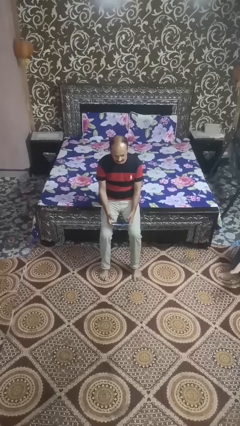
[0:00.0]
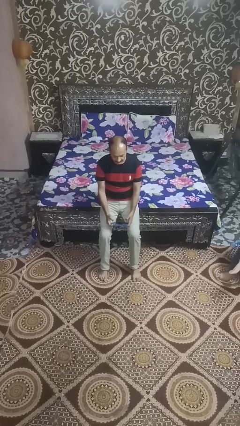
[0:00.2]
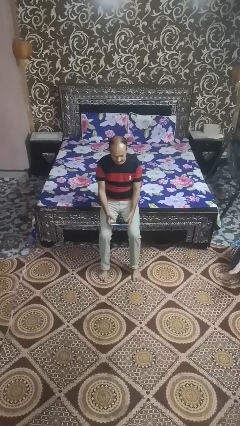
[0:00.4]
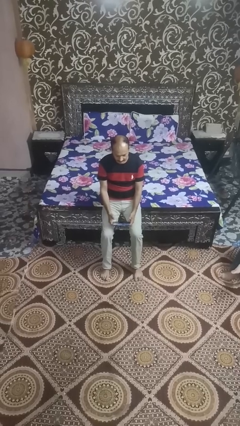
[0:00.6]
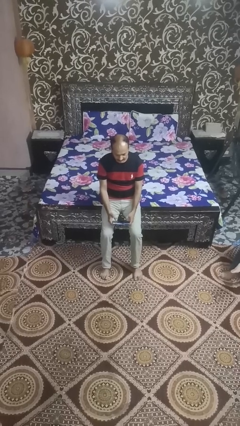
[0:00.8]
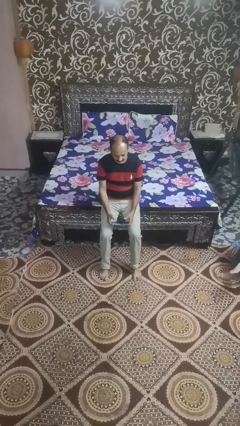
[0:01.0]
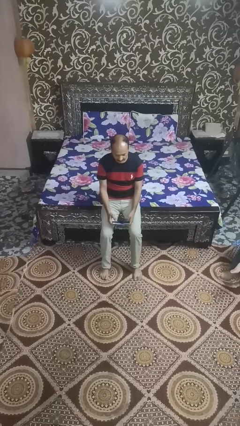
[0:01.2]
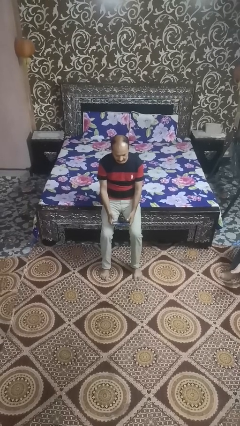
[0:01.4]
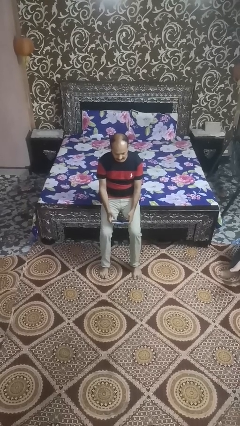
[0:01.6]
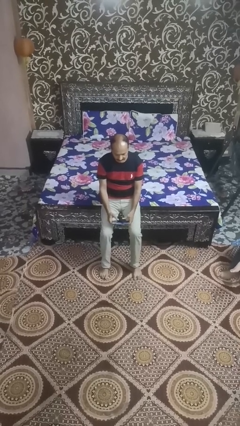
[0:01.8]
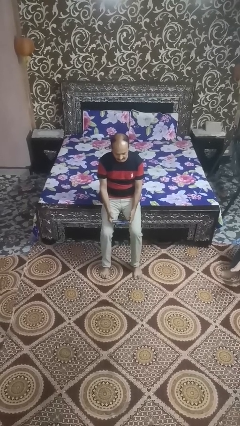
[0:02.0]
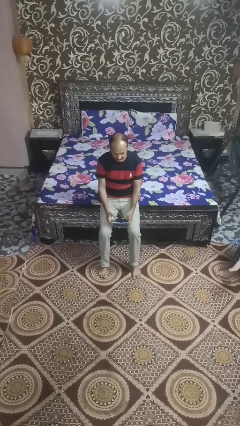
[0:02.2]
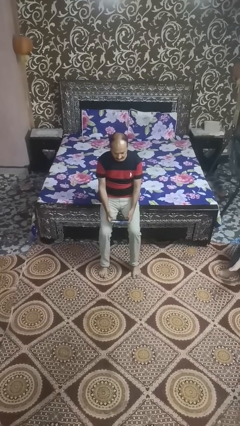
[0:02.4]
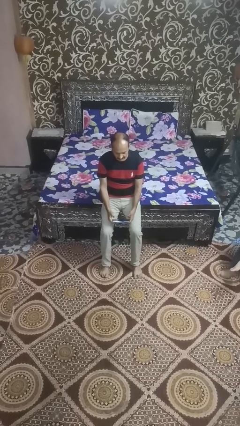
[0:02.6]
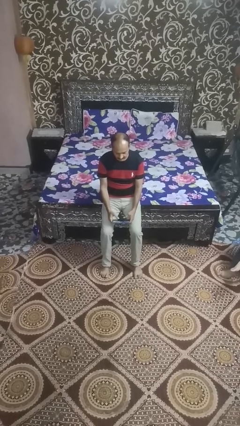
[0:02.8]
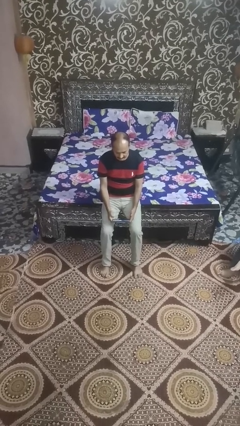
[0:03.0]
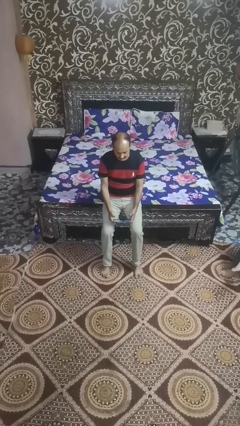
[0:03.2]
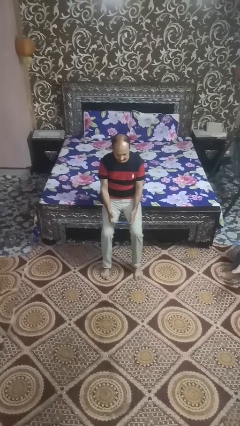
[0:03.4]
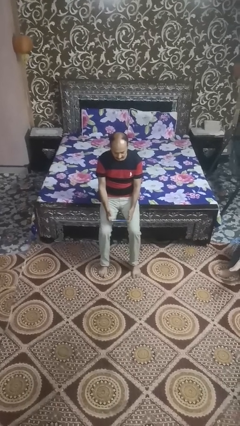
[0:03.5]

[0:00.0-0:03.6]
person interacts with handheld game

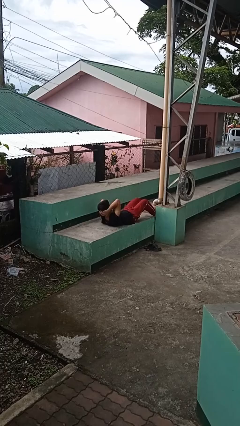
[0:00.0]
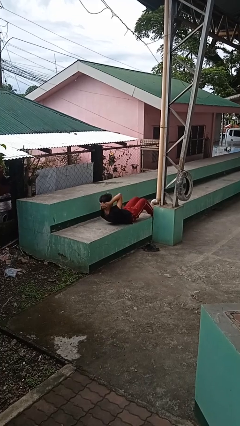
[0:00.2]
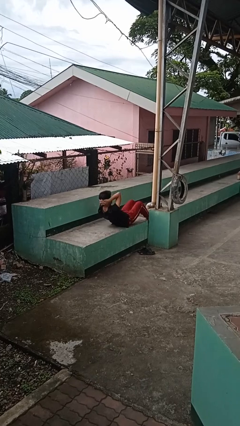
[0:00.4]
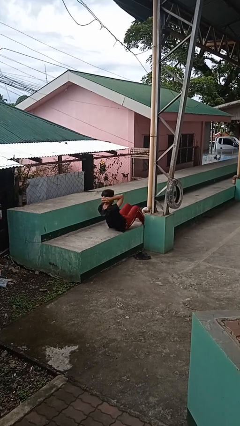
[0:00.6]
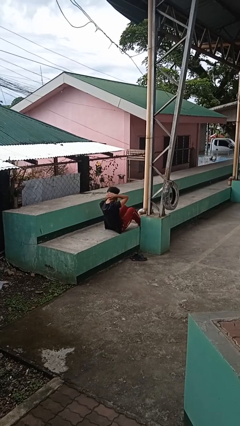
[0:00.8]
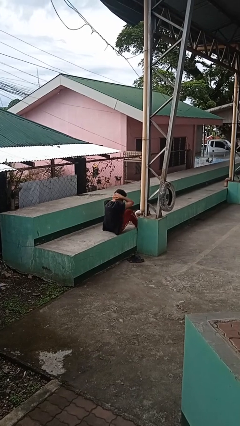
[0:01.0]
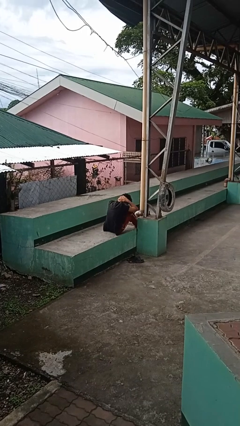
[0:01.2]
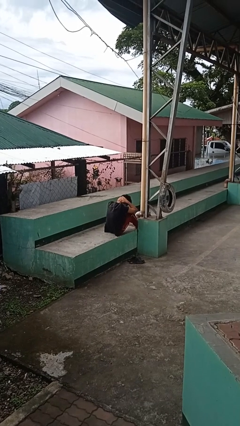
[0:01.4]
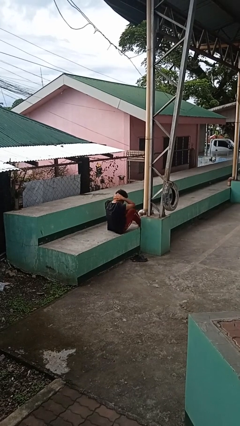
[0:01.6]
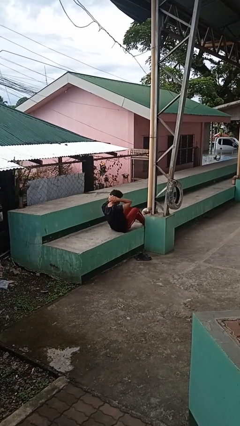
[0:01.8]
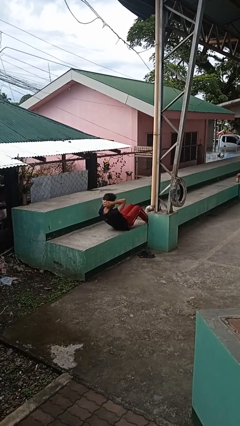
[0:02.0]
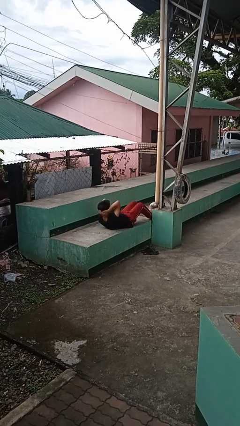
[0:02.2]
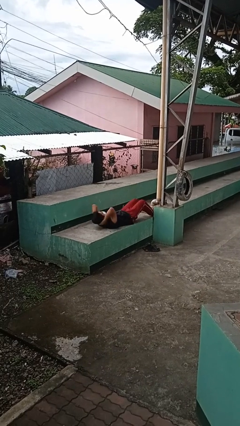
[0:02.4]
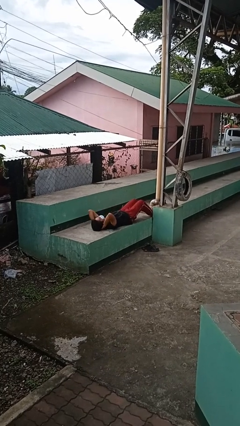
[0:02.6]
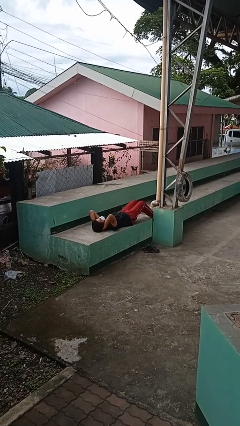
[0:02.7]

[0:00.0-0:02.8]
person exercises with situp

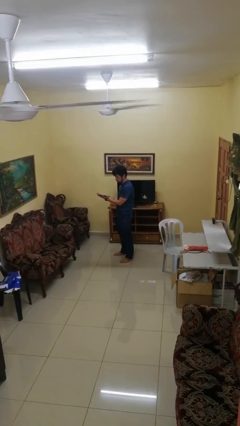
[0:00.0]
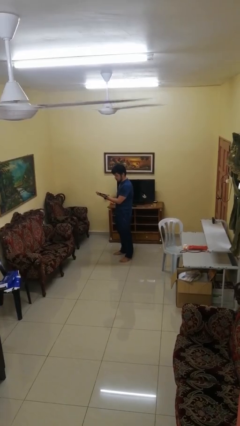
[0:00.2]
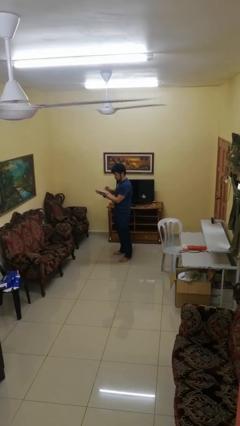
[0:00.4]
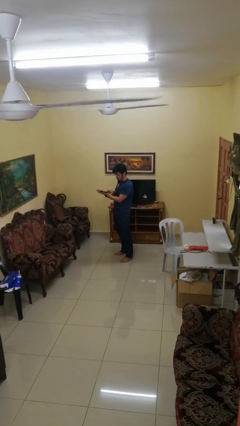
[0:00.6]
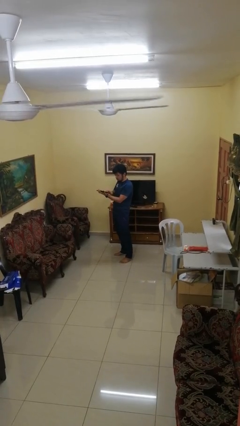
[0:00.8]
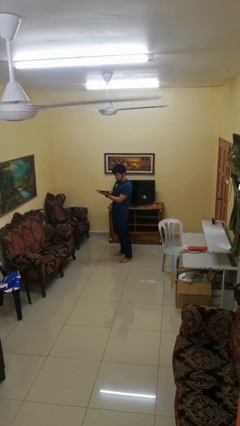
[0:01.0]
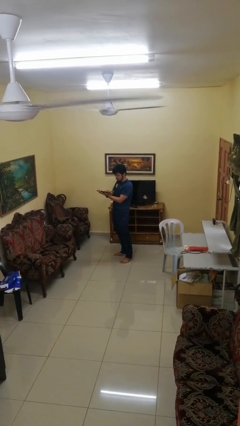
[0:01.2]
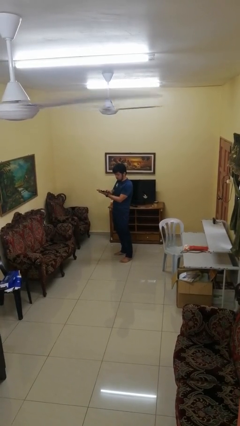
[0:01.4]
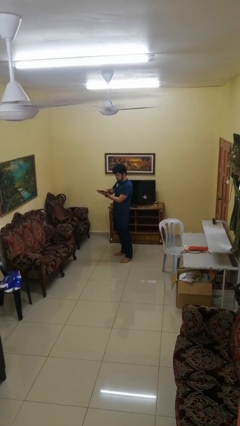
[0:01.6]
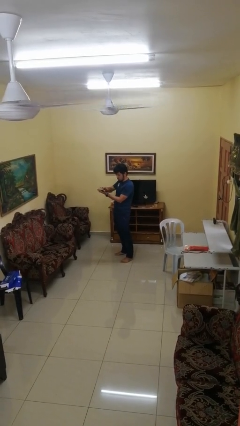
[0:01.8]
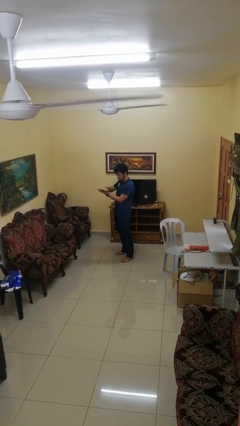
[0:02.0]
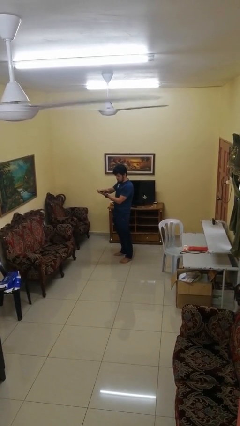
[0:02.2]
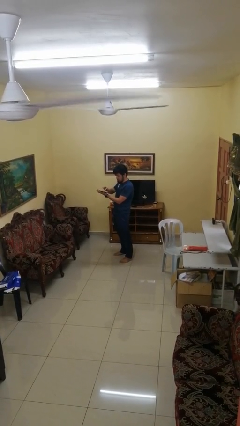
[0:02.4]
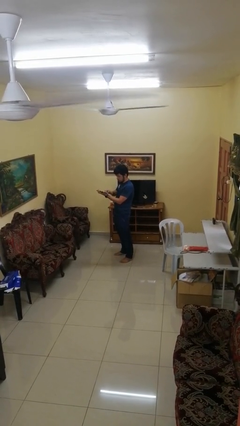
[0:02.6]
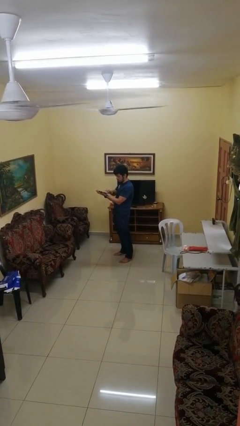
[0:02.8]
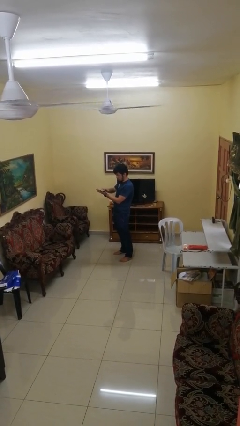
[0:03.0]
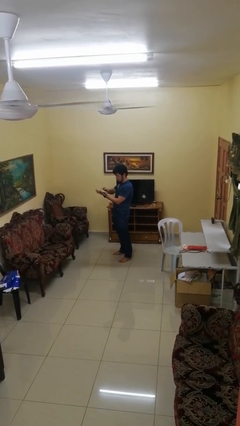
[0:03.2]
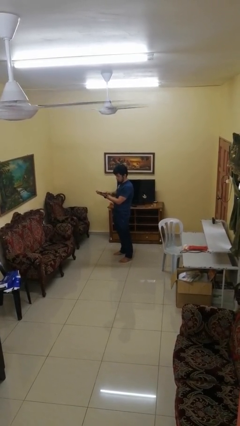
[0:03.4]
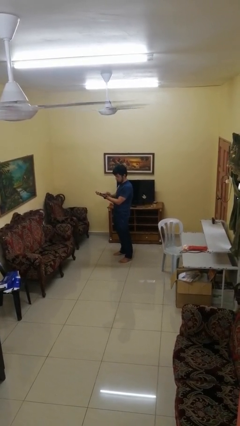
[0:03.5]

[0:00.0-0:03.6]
person interacts with tablet

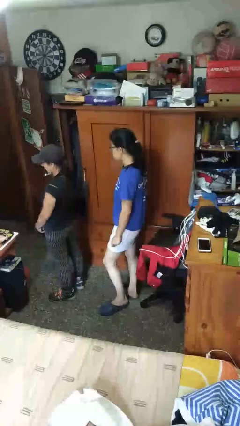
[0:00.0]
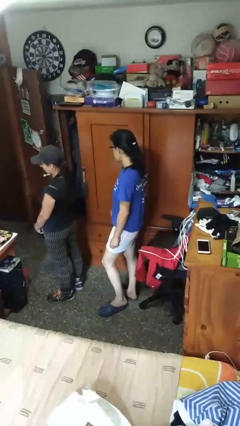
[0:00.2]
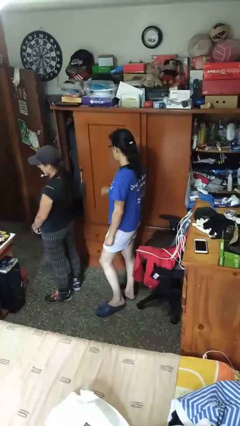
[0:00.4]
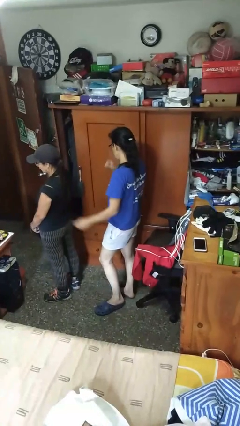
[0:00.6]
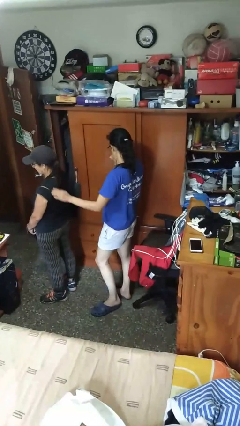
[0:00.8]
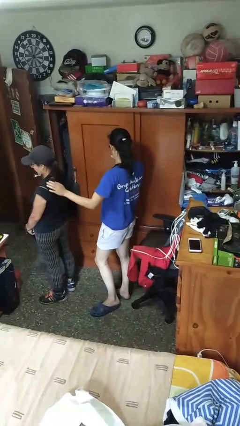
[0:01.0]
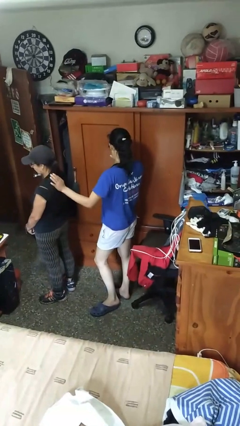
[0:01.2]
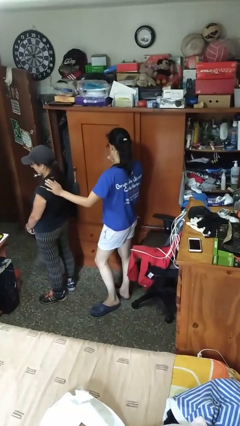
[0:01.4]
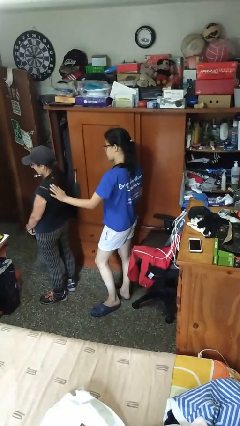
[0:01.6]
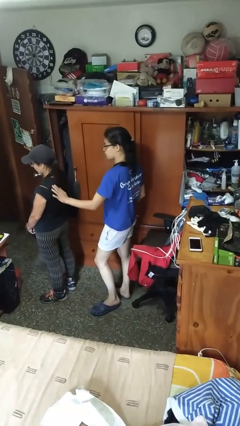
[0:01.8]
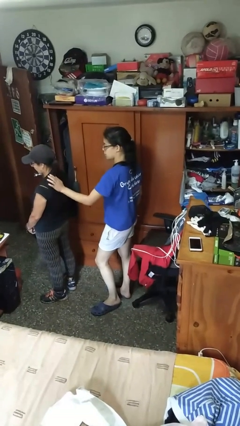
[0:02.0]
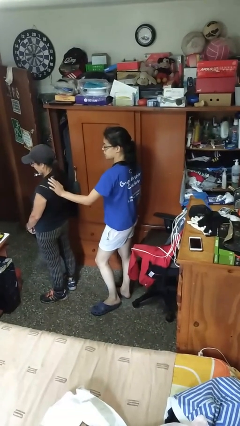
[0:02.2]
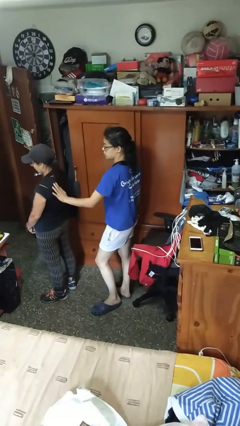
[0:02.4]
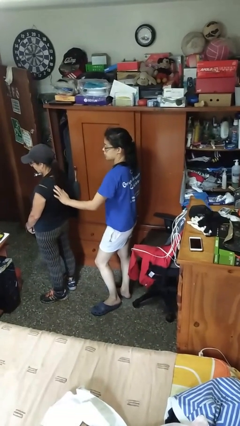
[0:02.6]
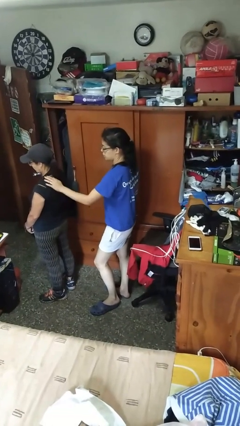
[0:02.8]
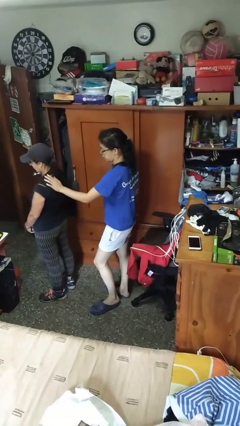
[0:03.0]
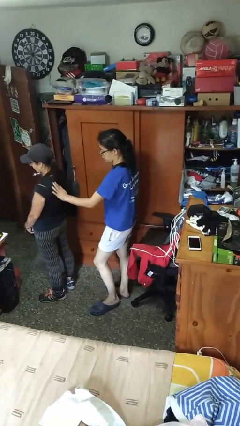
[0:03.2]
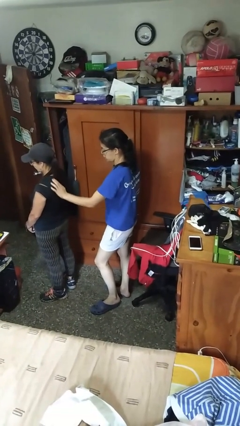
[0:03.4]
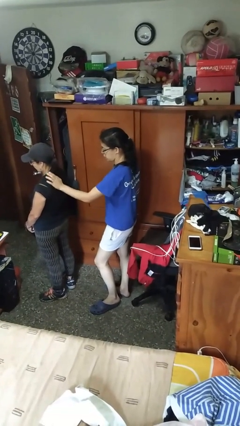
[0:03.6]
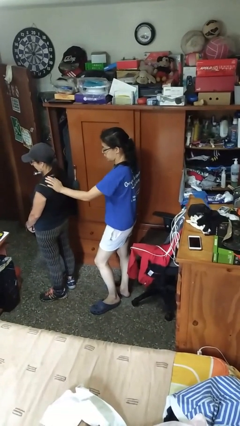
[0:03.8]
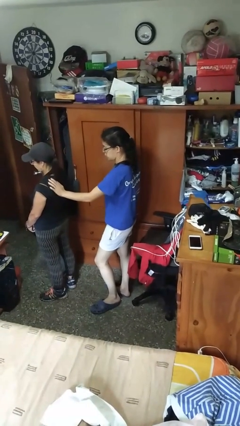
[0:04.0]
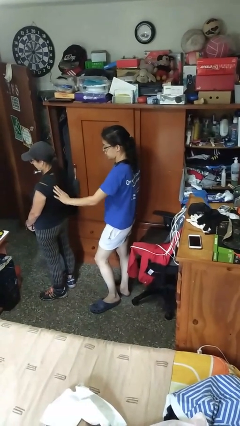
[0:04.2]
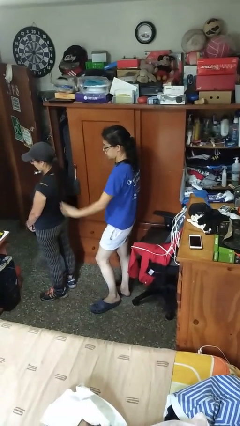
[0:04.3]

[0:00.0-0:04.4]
person touches back of person

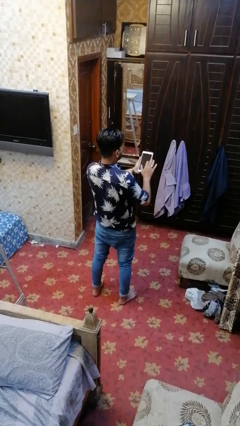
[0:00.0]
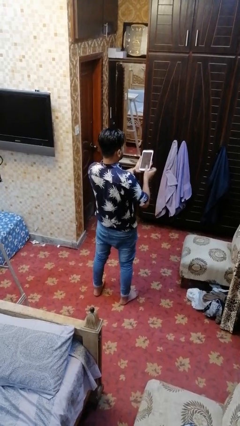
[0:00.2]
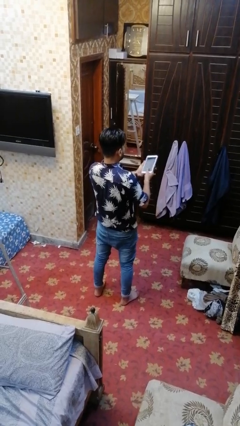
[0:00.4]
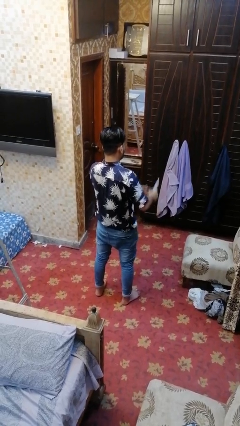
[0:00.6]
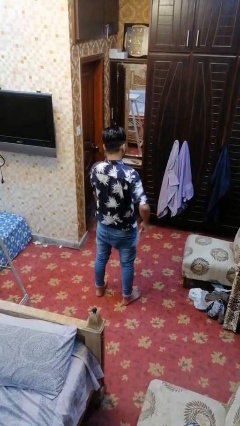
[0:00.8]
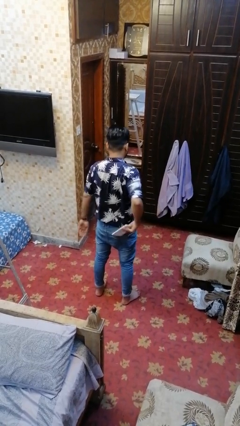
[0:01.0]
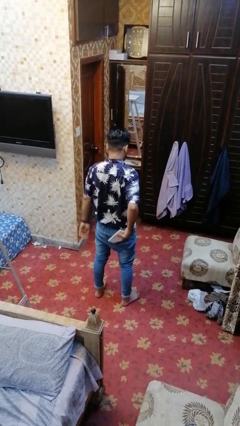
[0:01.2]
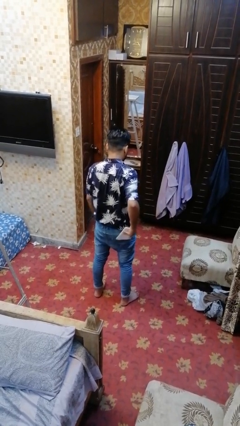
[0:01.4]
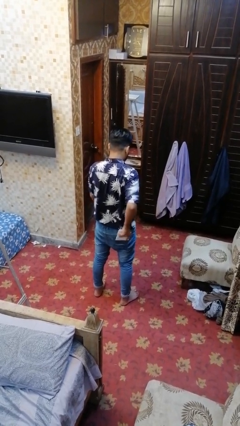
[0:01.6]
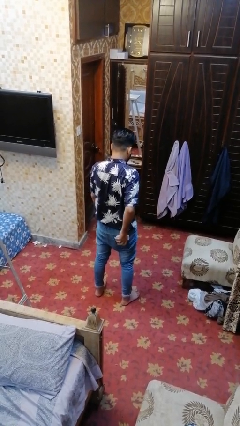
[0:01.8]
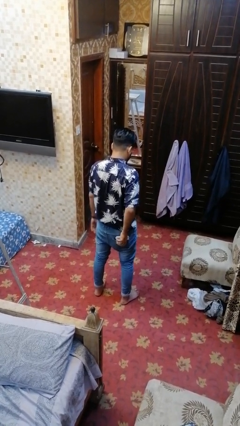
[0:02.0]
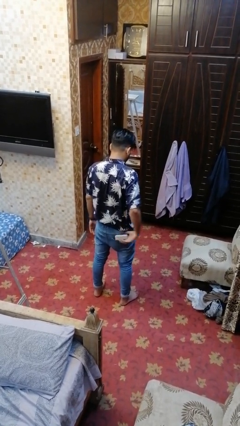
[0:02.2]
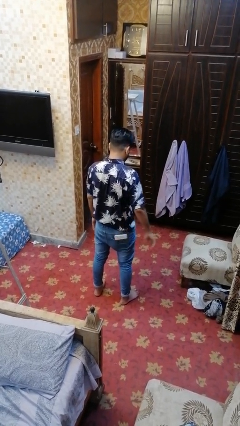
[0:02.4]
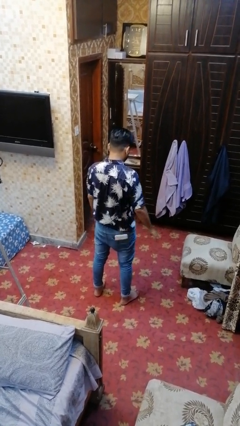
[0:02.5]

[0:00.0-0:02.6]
person puts phone into pocket

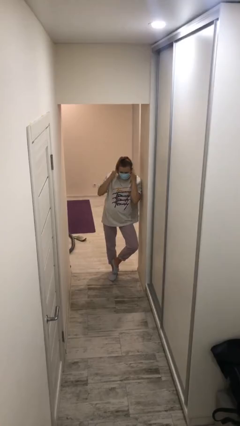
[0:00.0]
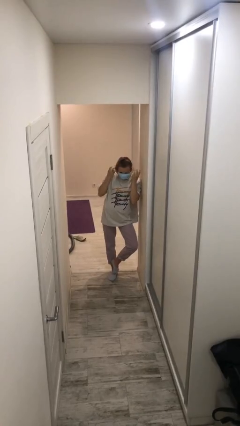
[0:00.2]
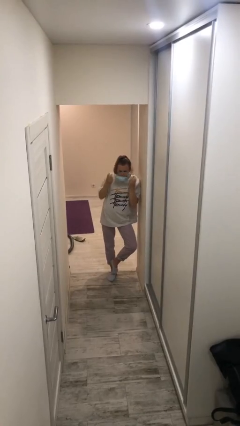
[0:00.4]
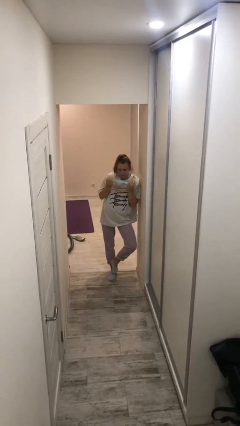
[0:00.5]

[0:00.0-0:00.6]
person takes off facemask
